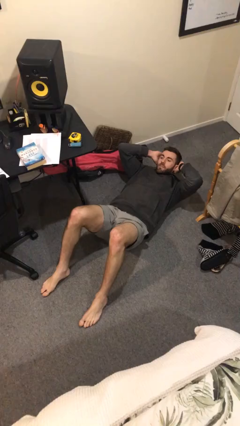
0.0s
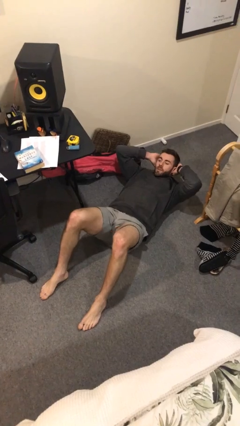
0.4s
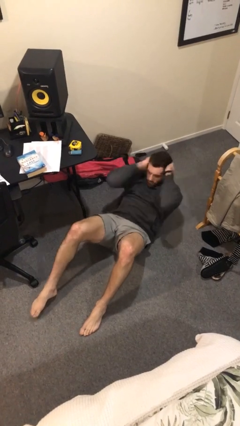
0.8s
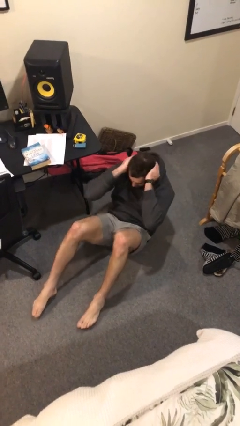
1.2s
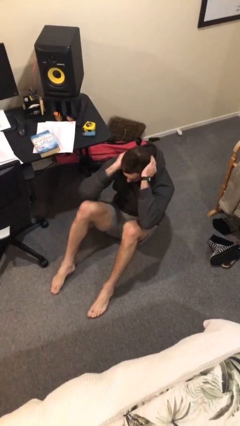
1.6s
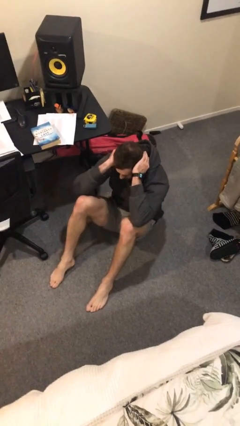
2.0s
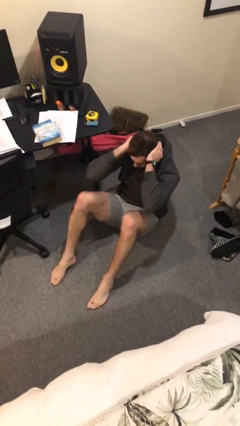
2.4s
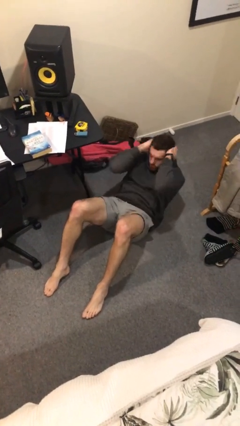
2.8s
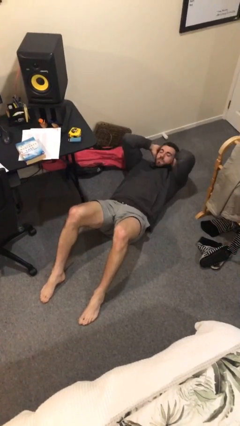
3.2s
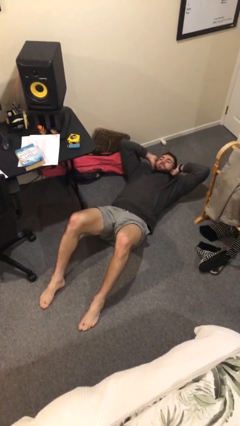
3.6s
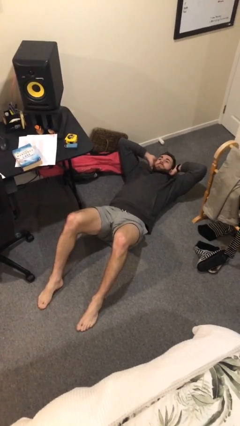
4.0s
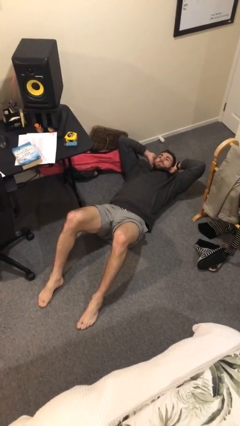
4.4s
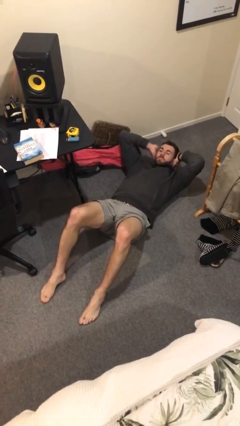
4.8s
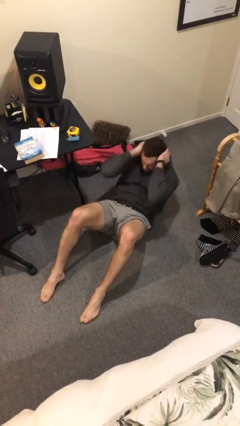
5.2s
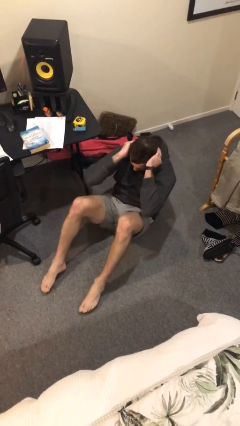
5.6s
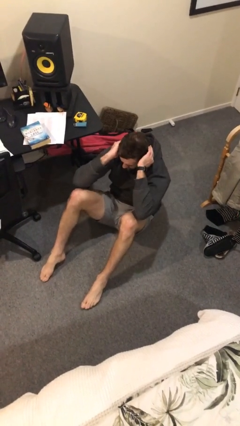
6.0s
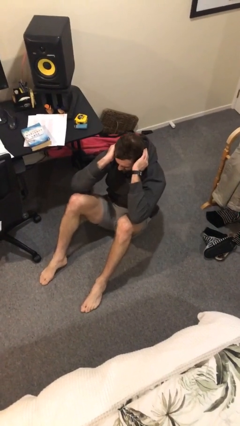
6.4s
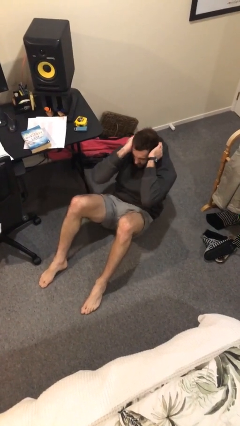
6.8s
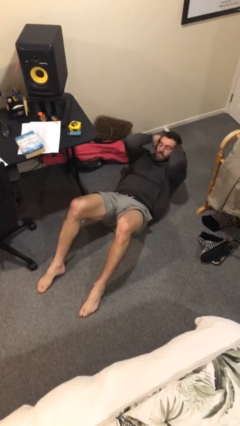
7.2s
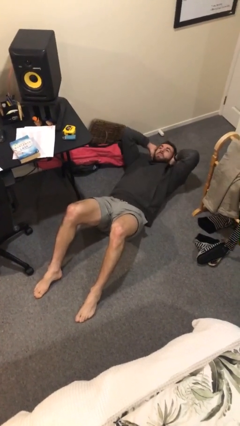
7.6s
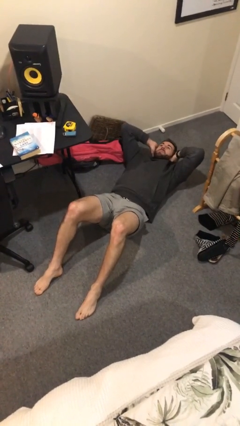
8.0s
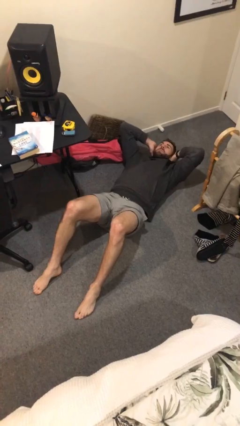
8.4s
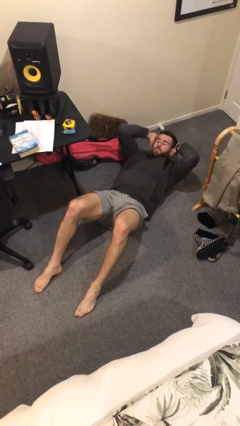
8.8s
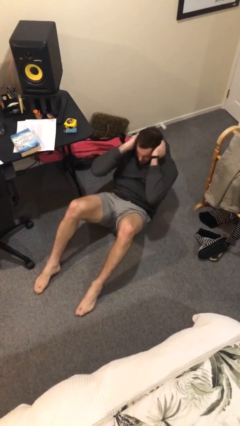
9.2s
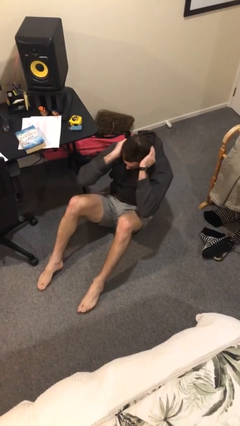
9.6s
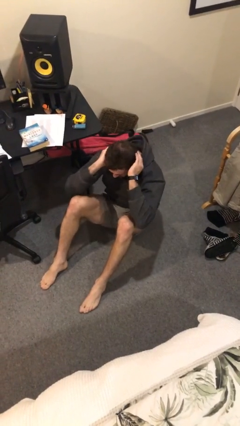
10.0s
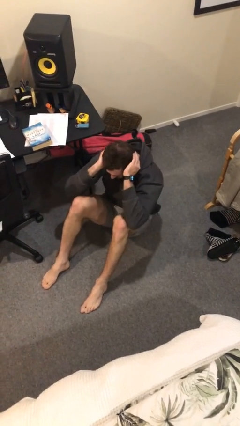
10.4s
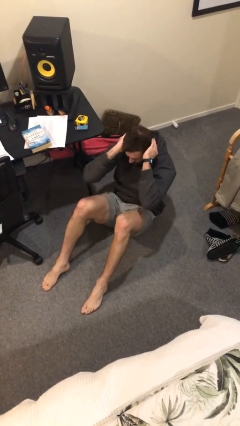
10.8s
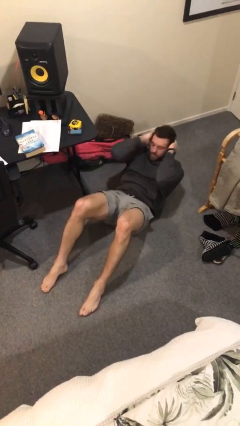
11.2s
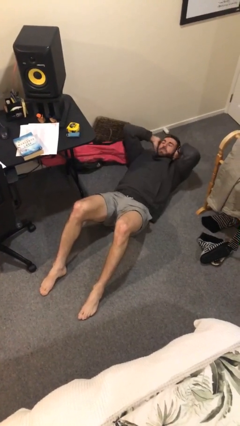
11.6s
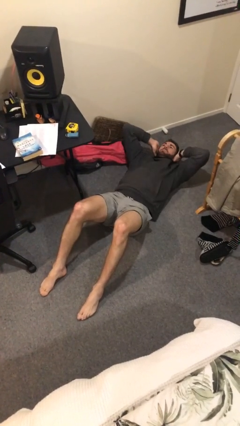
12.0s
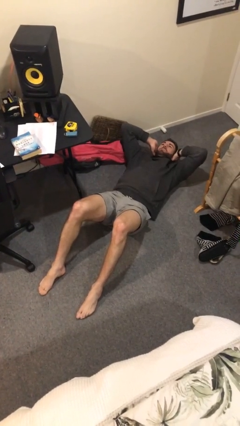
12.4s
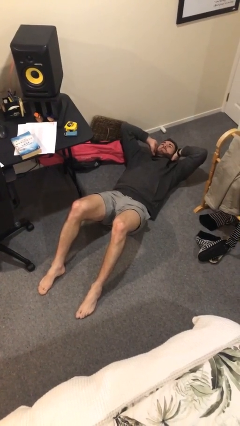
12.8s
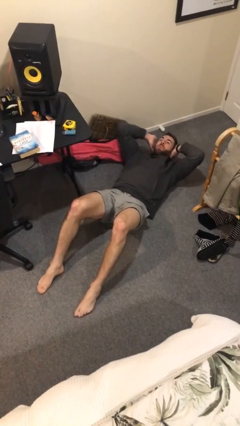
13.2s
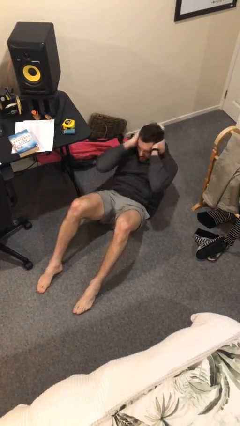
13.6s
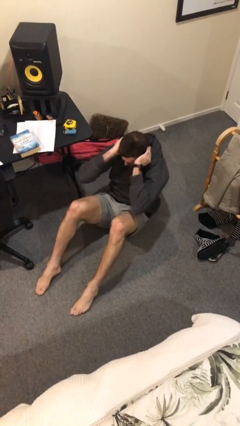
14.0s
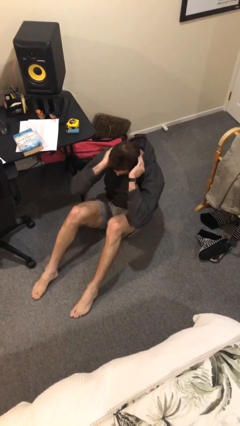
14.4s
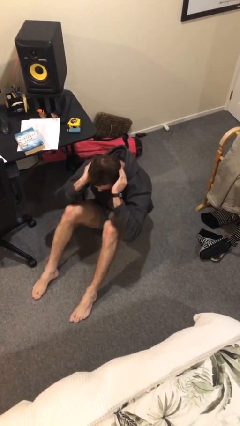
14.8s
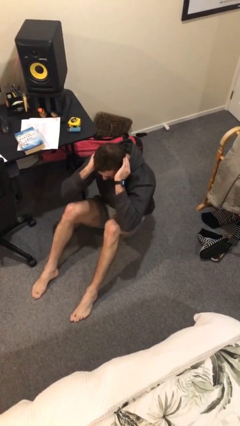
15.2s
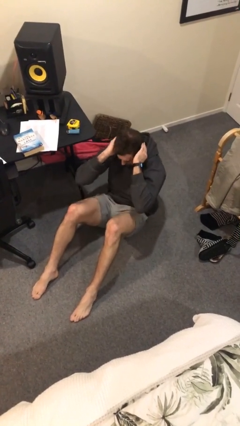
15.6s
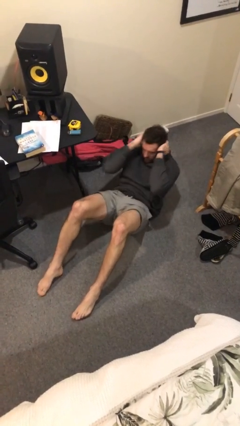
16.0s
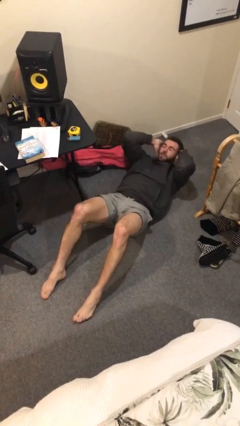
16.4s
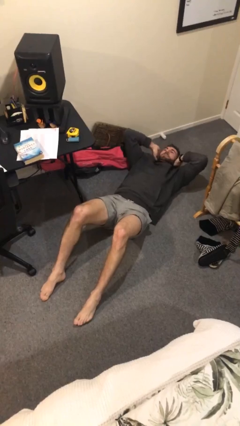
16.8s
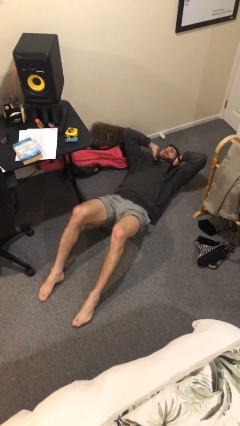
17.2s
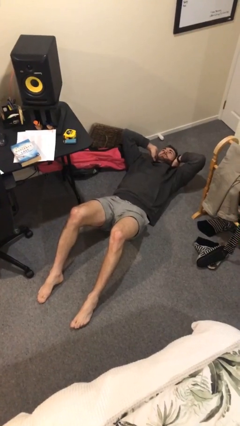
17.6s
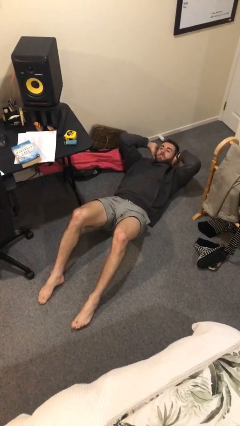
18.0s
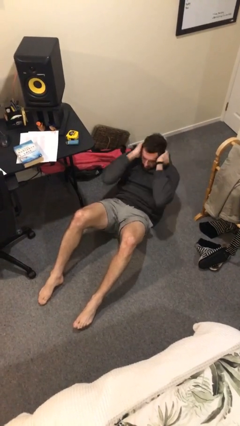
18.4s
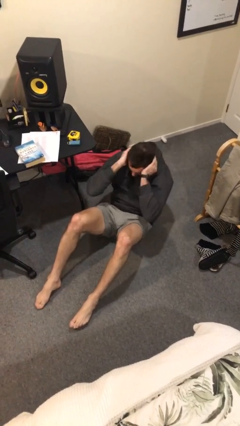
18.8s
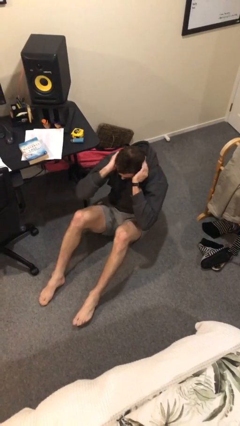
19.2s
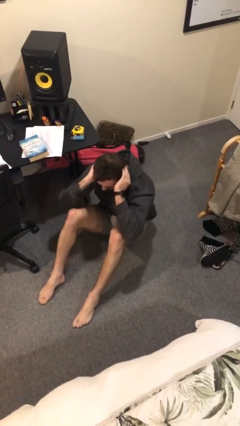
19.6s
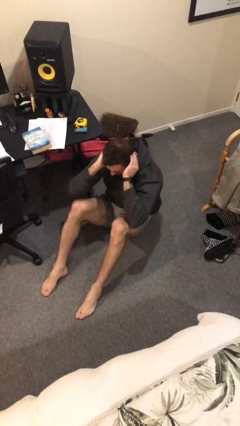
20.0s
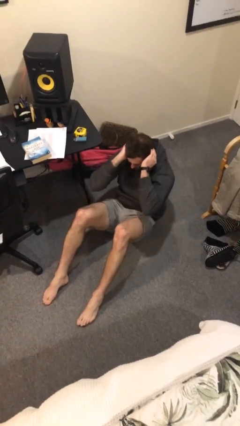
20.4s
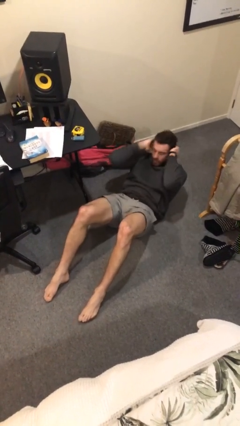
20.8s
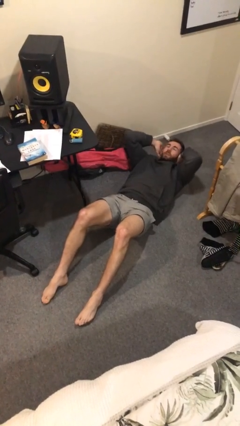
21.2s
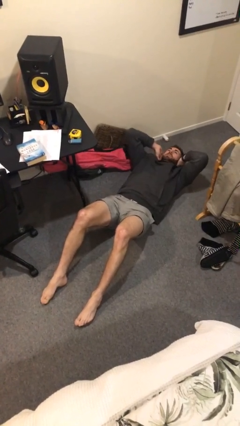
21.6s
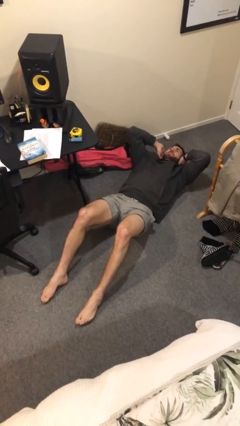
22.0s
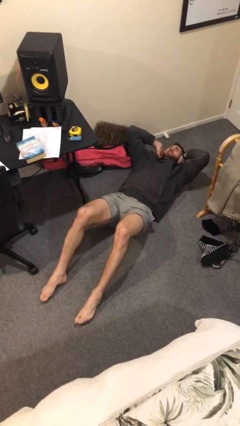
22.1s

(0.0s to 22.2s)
person exercises with situp

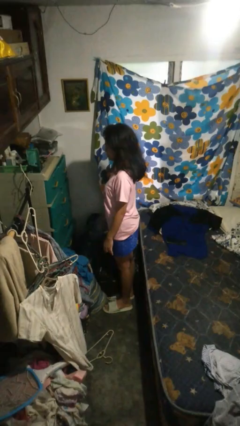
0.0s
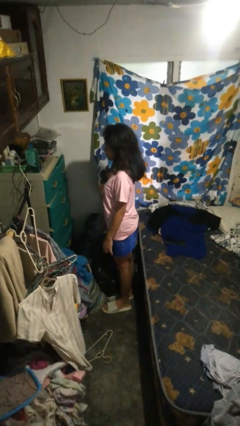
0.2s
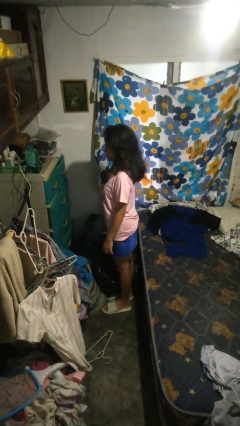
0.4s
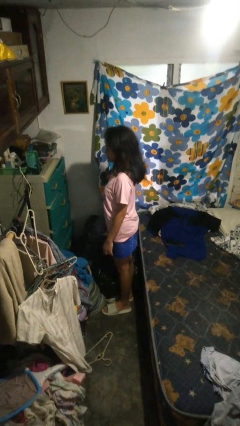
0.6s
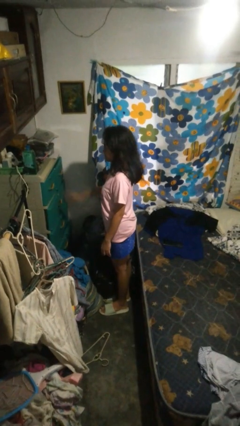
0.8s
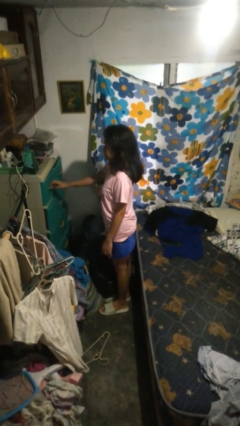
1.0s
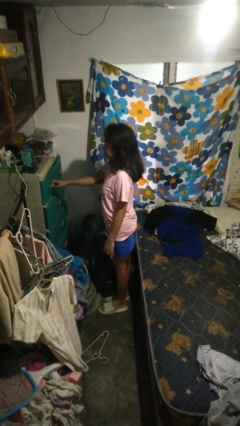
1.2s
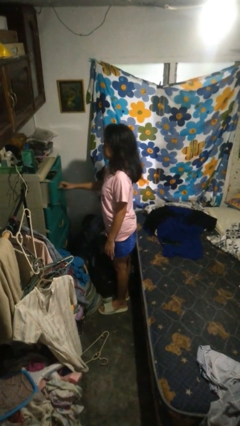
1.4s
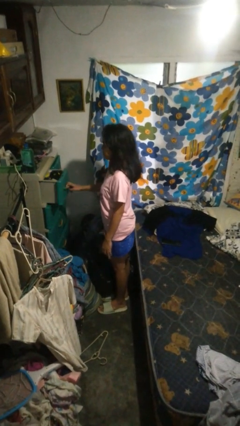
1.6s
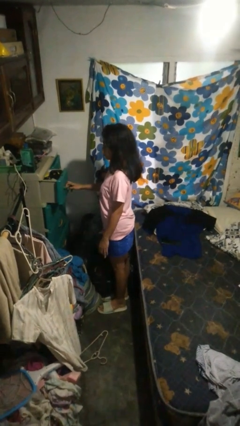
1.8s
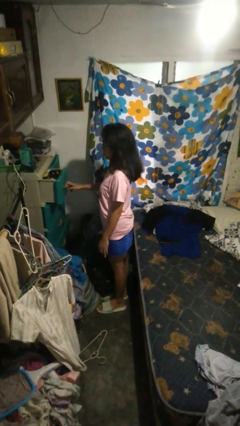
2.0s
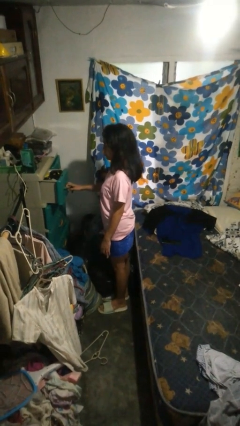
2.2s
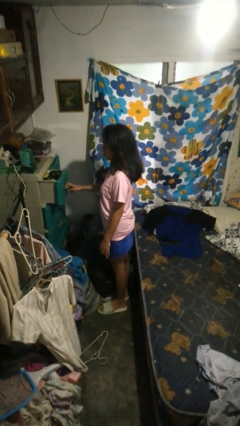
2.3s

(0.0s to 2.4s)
person opens dresser drawer

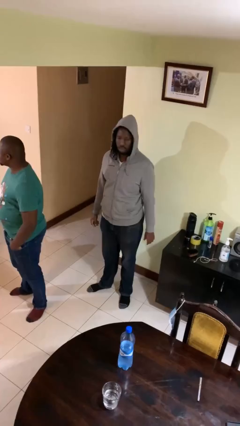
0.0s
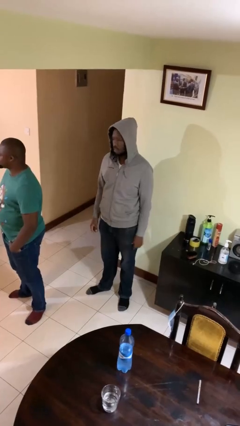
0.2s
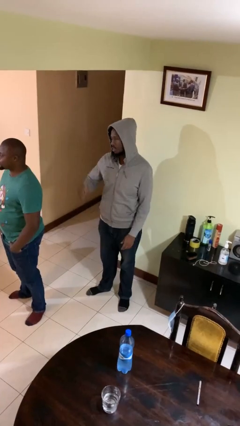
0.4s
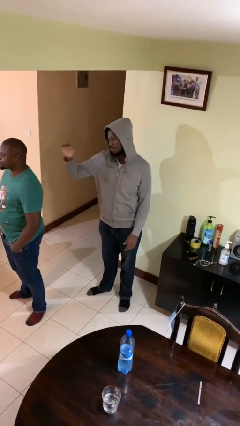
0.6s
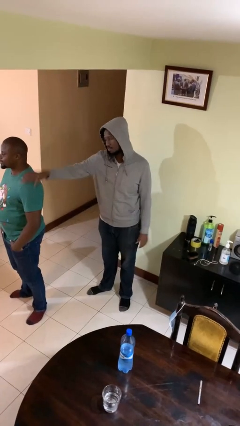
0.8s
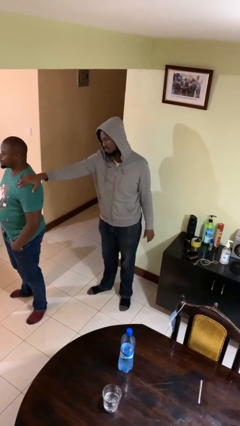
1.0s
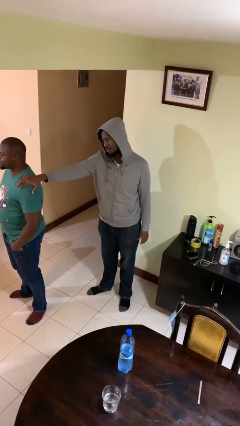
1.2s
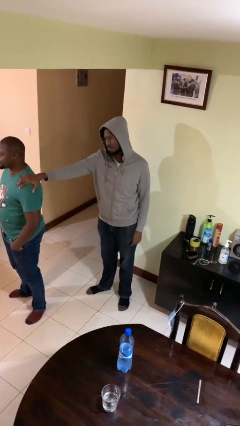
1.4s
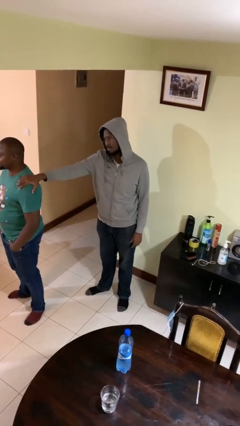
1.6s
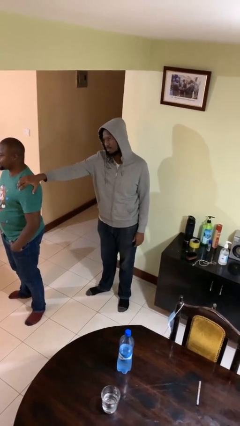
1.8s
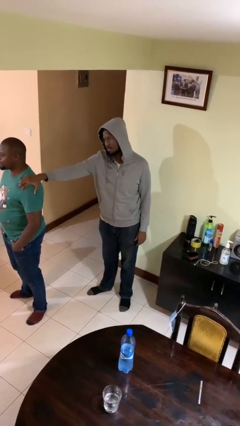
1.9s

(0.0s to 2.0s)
person grabs person by shoulder

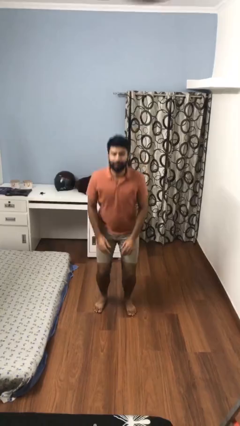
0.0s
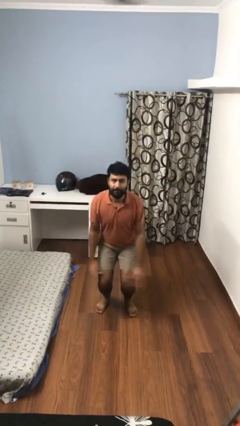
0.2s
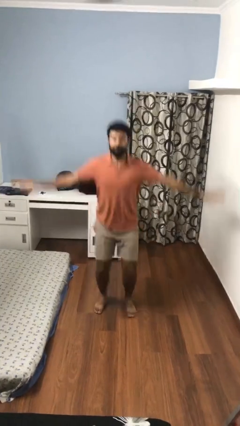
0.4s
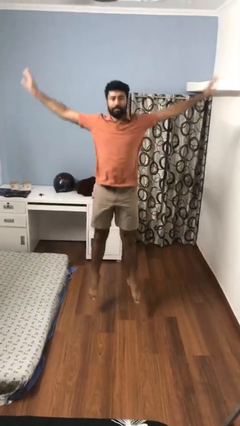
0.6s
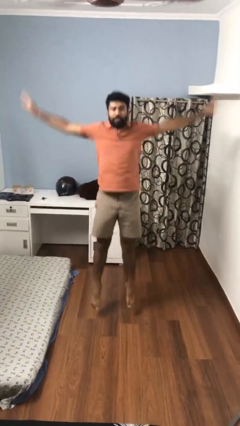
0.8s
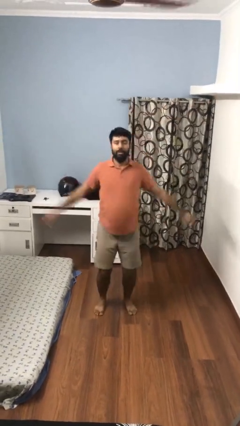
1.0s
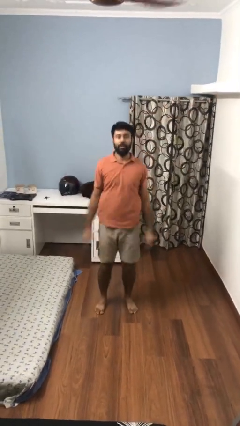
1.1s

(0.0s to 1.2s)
person exercises with jumping jacks

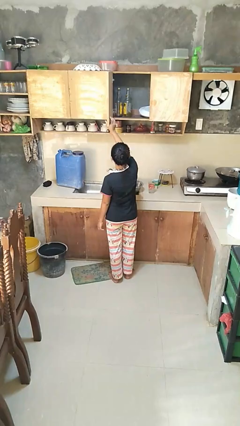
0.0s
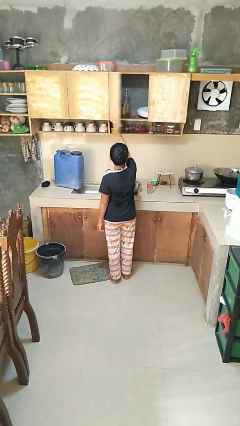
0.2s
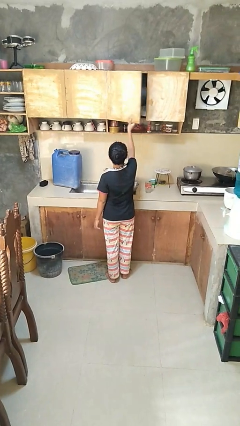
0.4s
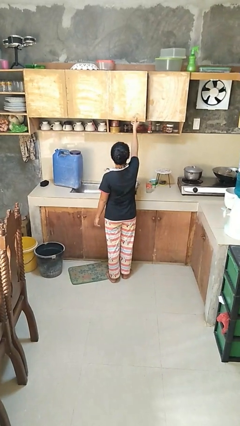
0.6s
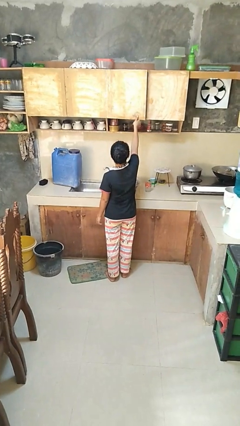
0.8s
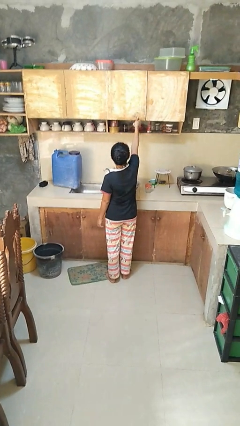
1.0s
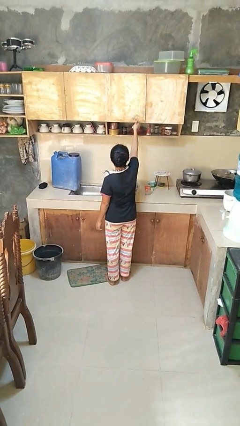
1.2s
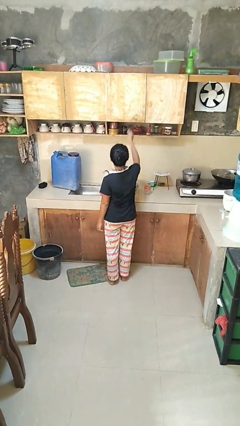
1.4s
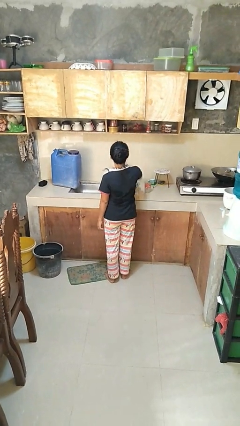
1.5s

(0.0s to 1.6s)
person closes cabinet
